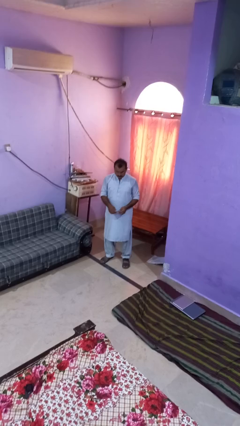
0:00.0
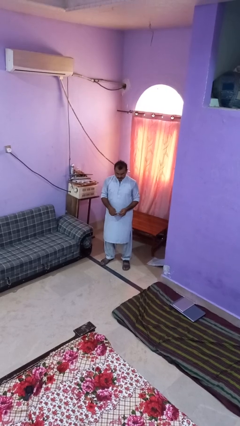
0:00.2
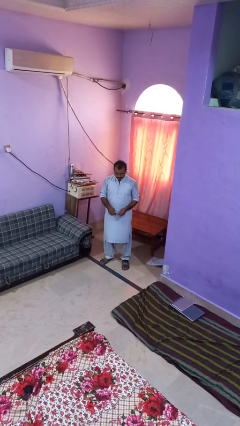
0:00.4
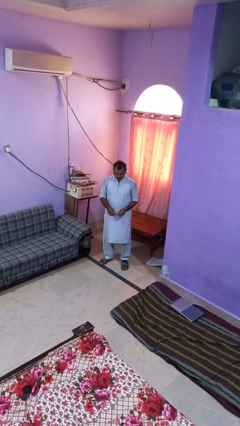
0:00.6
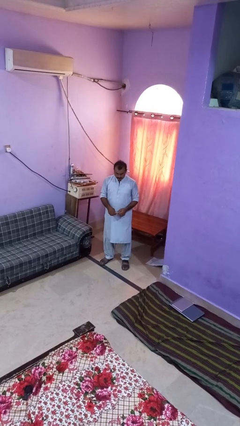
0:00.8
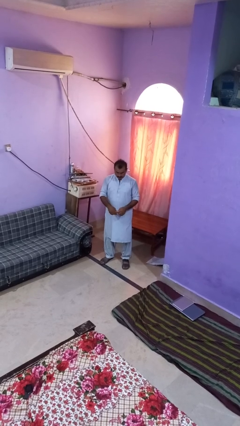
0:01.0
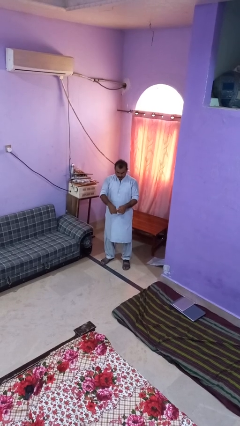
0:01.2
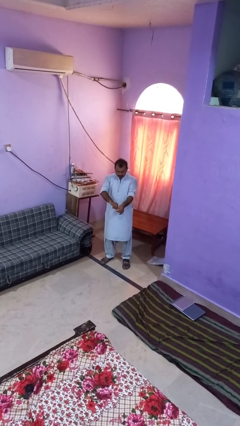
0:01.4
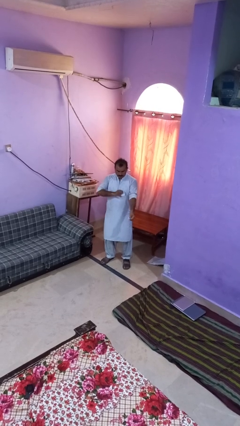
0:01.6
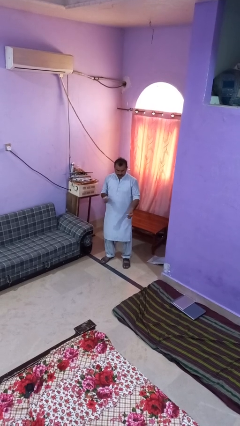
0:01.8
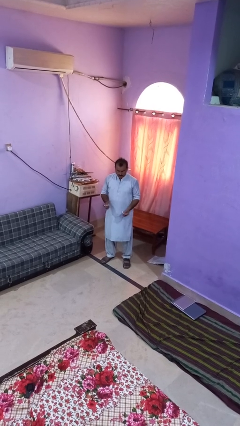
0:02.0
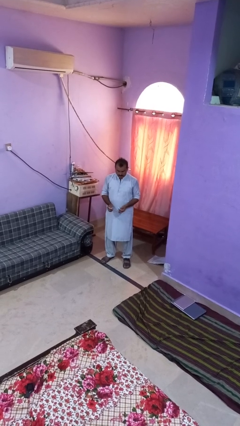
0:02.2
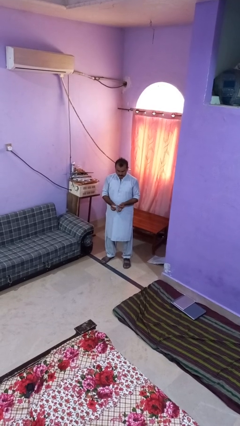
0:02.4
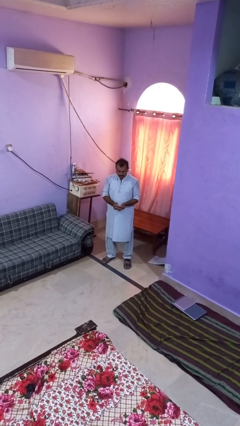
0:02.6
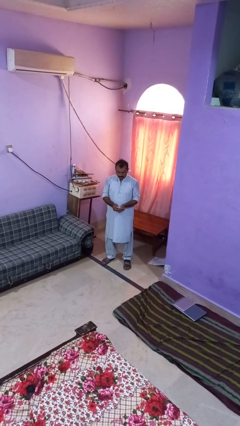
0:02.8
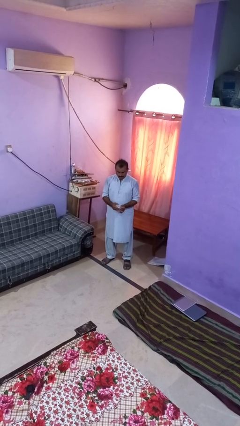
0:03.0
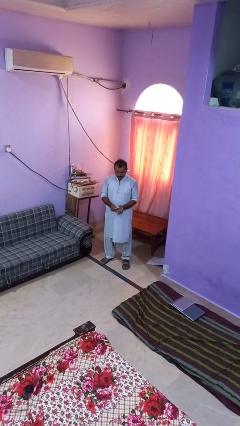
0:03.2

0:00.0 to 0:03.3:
person tears paper

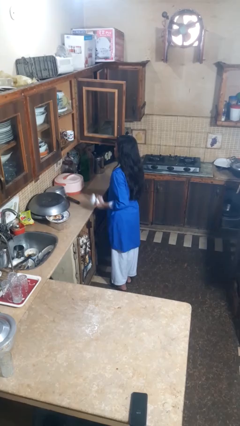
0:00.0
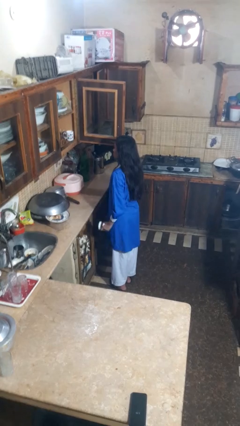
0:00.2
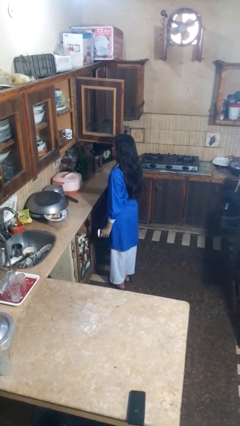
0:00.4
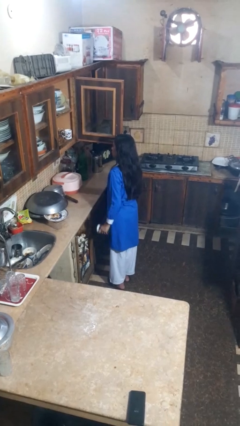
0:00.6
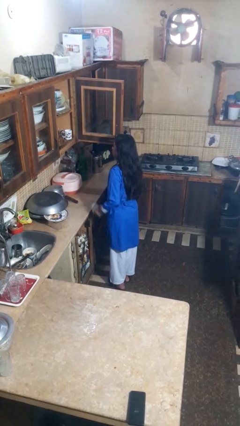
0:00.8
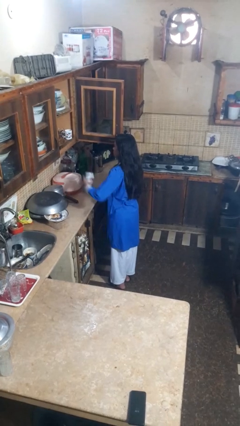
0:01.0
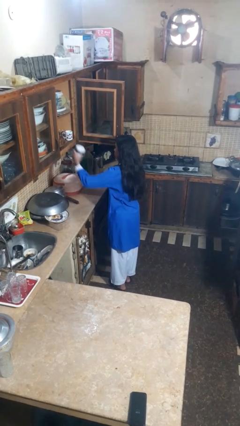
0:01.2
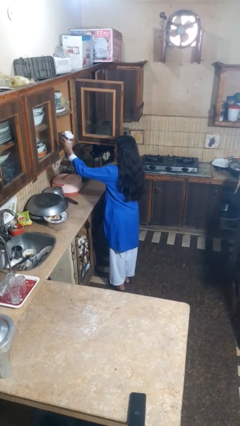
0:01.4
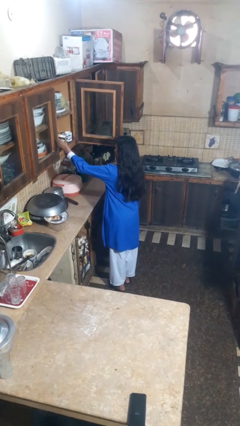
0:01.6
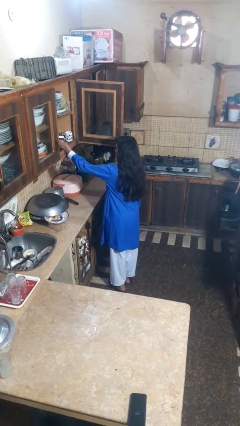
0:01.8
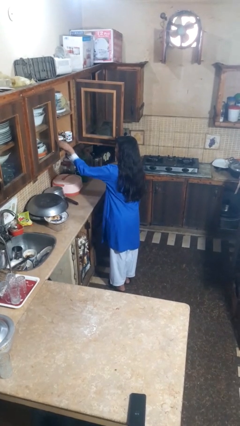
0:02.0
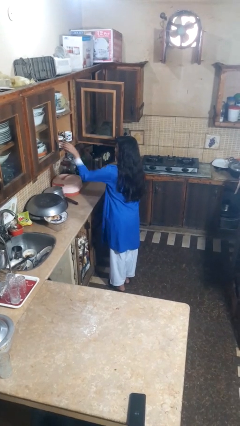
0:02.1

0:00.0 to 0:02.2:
person puts object in cabinet

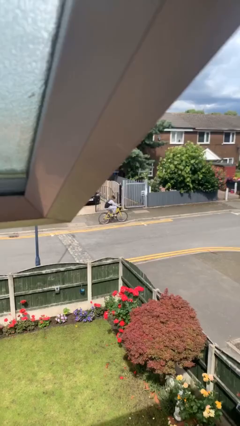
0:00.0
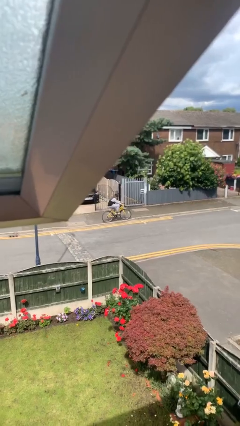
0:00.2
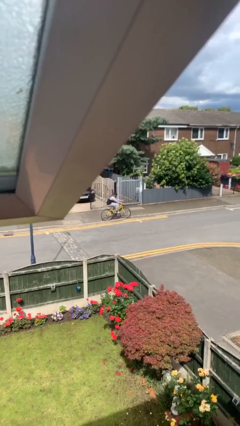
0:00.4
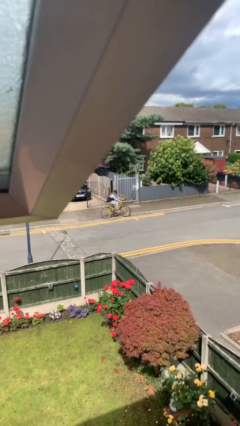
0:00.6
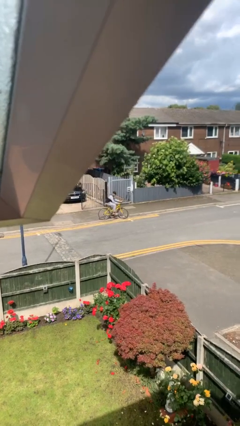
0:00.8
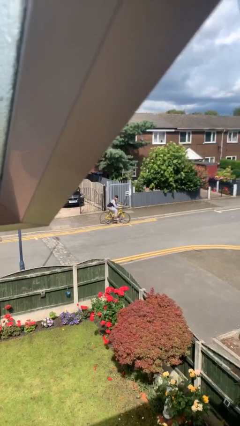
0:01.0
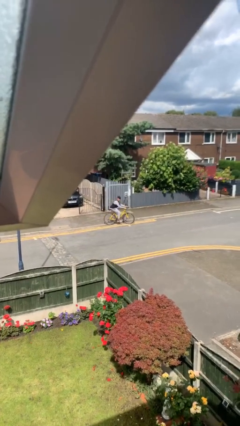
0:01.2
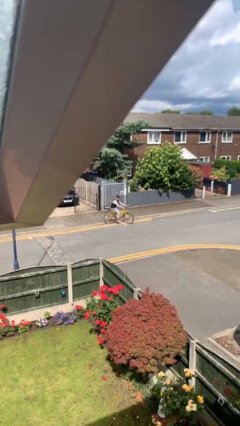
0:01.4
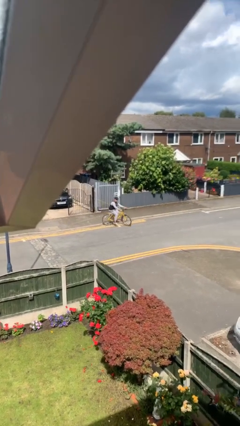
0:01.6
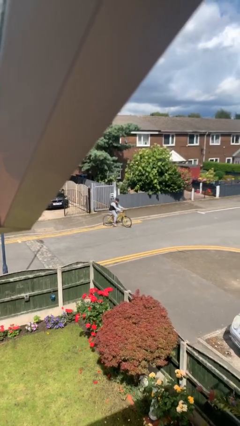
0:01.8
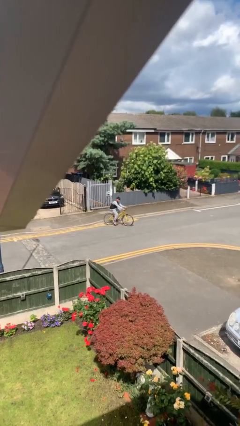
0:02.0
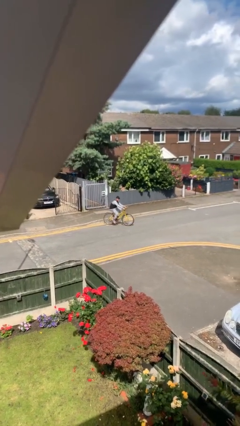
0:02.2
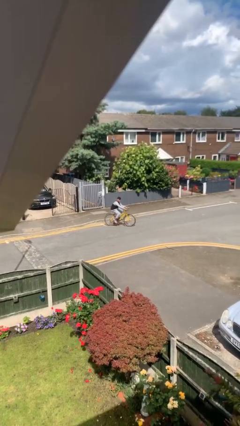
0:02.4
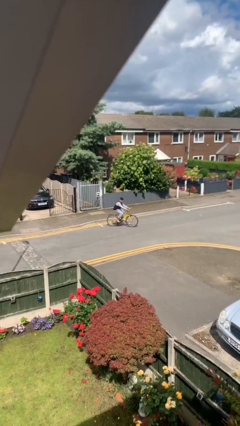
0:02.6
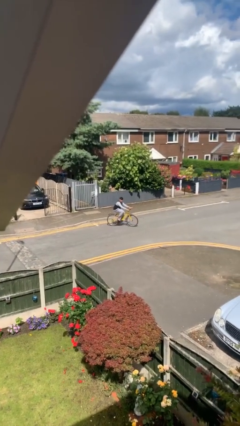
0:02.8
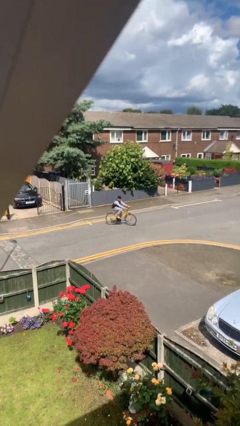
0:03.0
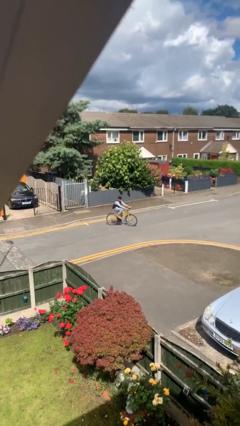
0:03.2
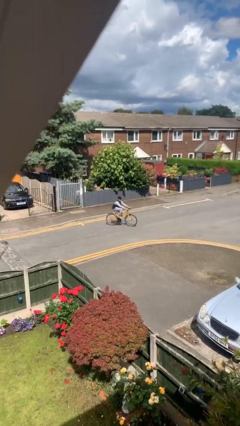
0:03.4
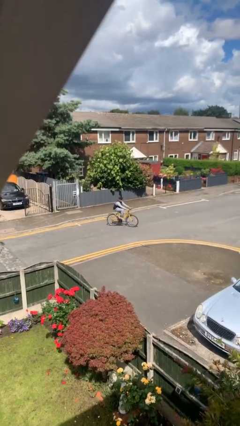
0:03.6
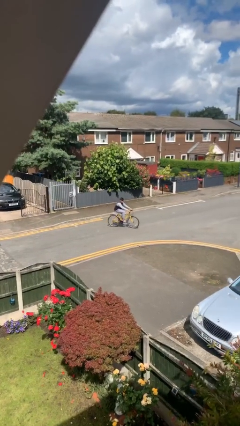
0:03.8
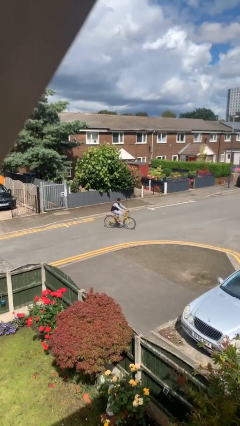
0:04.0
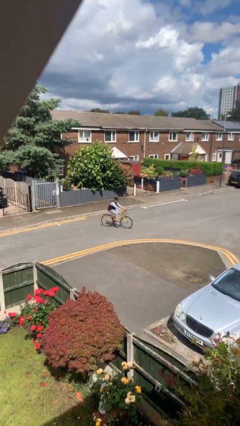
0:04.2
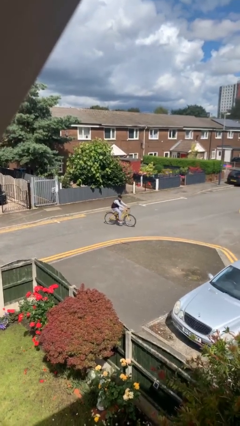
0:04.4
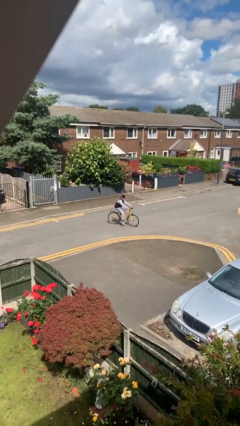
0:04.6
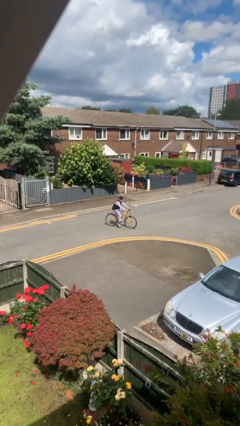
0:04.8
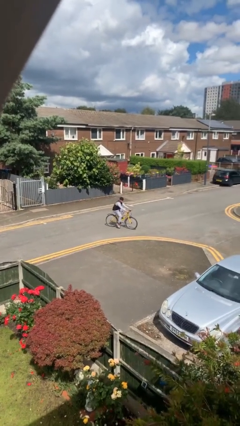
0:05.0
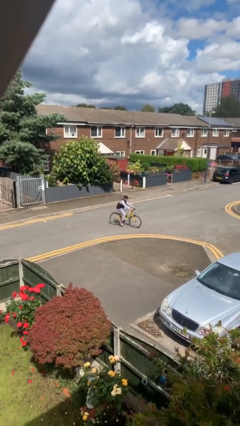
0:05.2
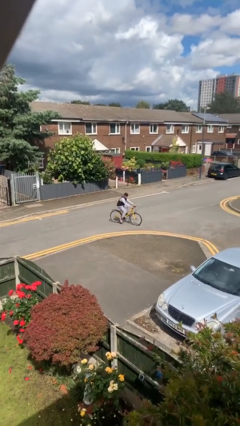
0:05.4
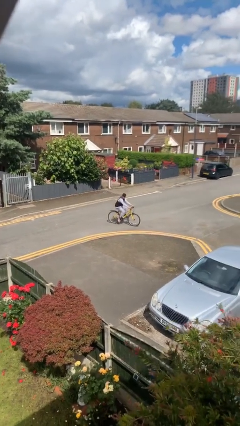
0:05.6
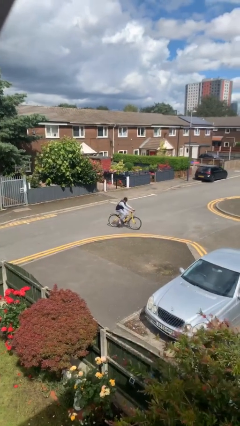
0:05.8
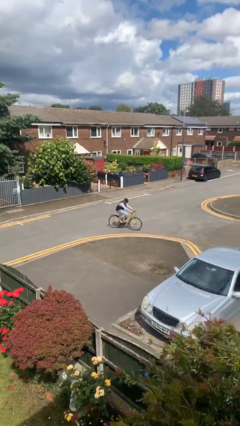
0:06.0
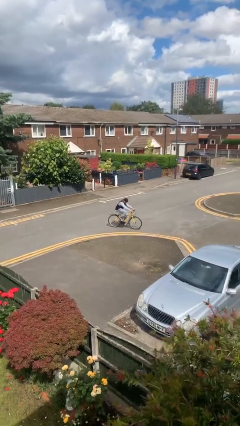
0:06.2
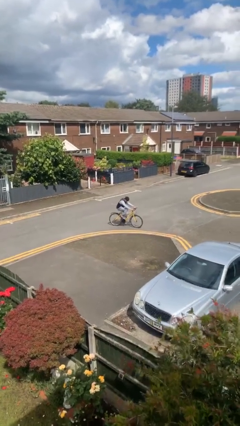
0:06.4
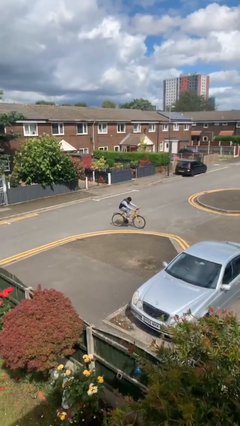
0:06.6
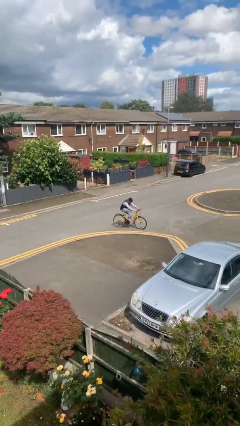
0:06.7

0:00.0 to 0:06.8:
person rides bicycle

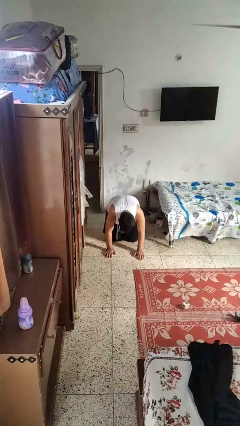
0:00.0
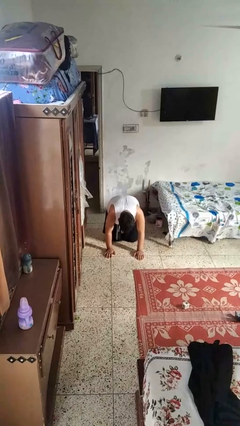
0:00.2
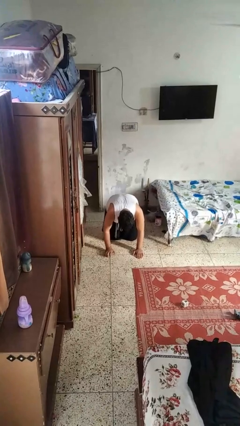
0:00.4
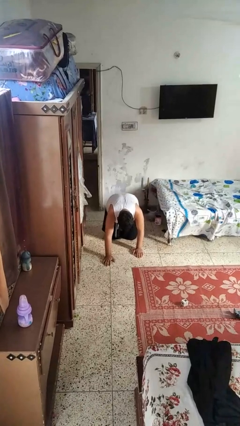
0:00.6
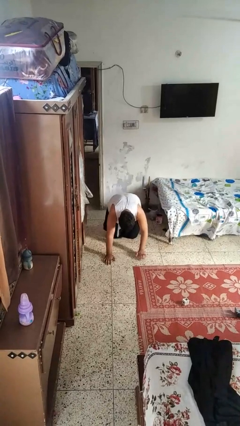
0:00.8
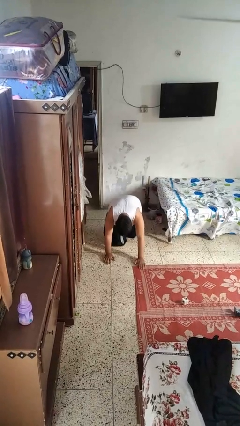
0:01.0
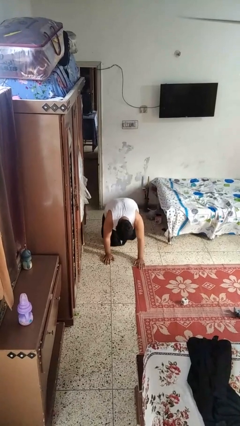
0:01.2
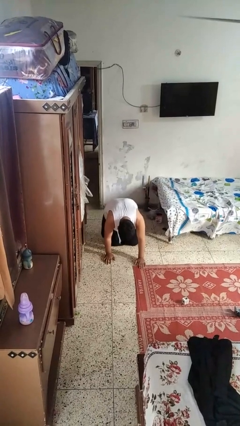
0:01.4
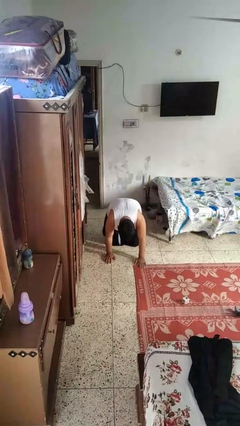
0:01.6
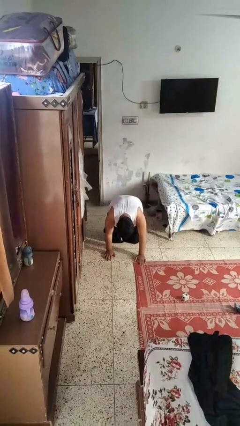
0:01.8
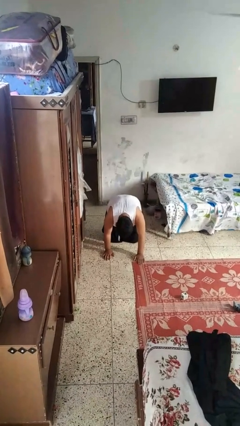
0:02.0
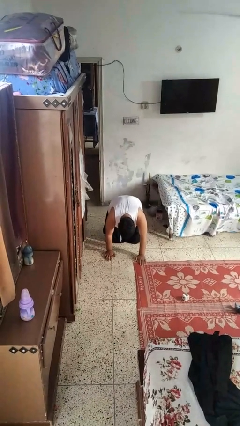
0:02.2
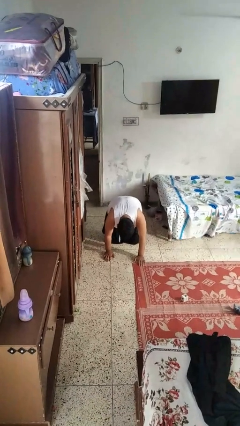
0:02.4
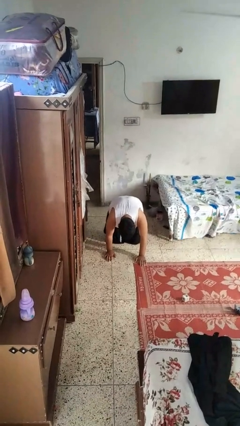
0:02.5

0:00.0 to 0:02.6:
person crawls

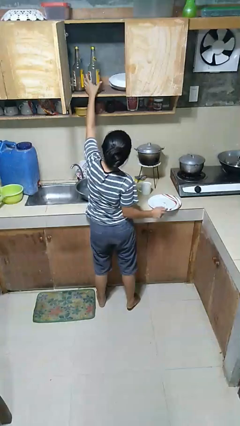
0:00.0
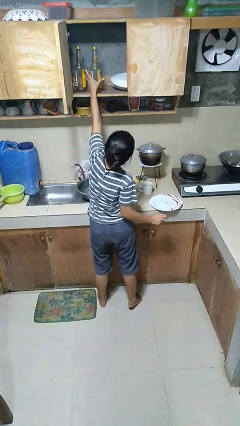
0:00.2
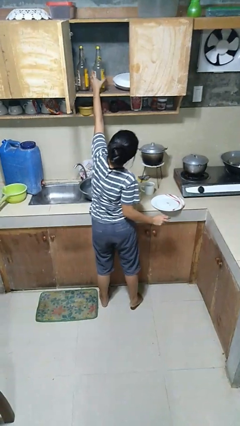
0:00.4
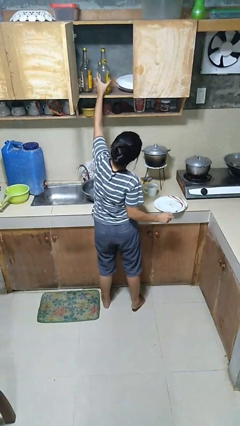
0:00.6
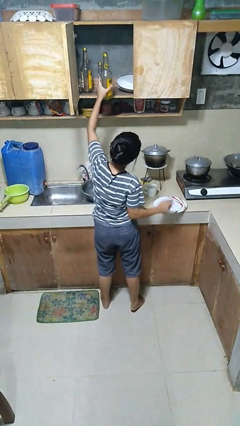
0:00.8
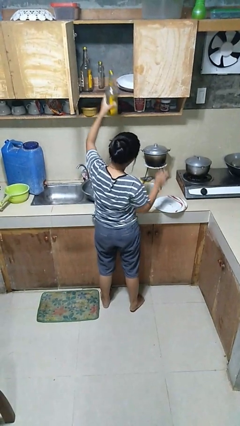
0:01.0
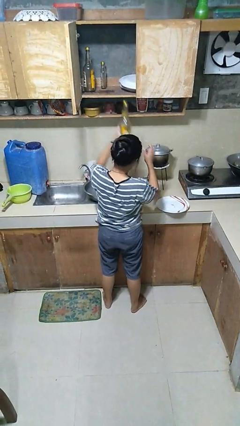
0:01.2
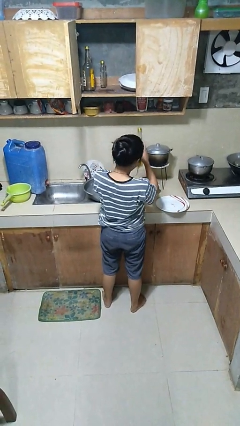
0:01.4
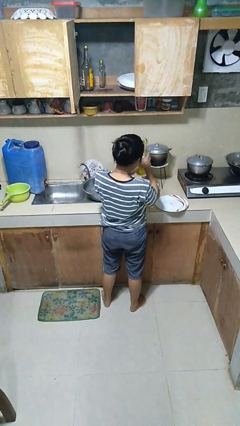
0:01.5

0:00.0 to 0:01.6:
person takes object from cabinet

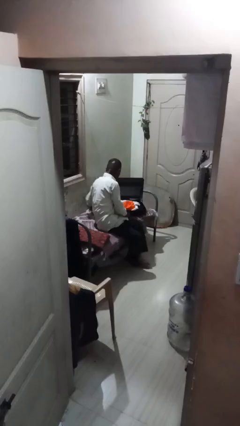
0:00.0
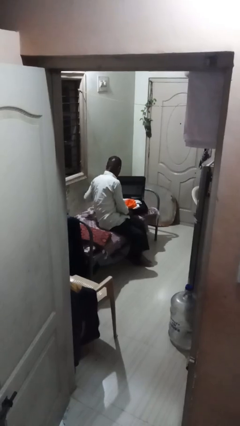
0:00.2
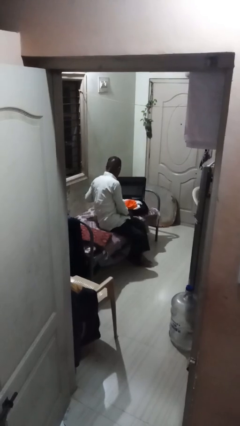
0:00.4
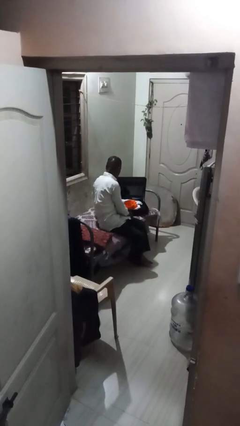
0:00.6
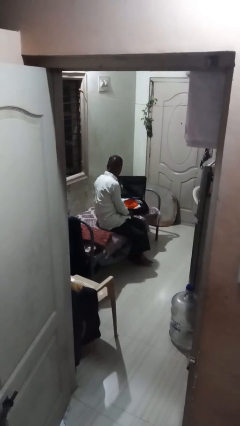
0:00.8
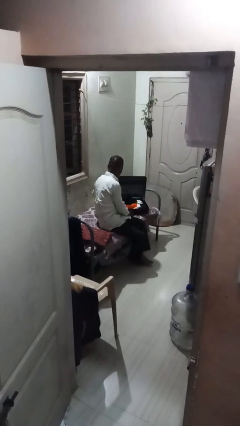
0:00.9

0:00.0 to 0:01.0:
person loads clothes into suitcase

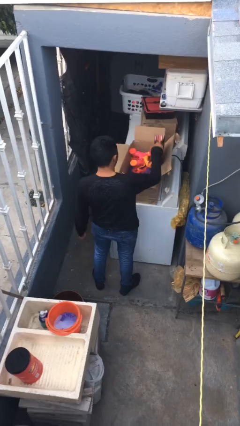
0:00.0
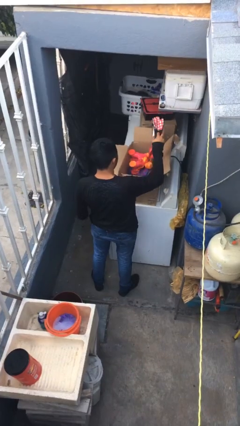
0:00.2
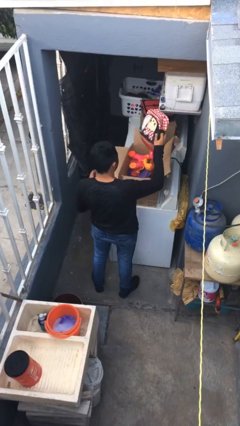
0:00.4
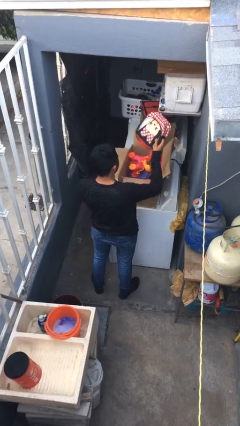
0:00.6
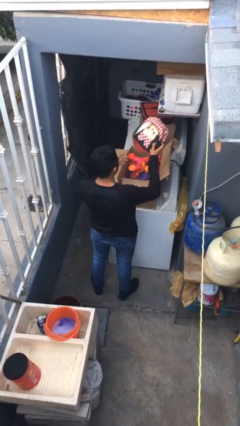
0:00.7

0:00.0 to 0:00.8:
person takes object from box
